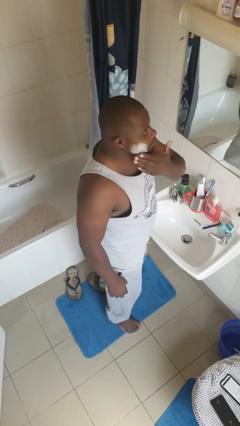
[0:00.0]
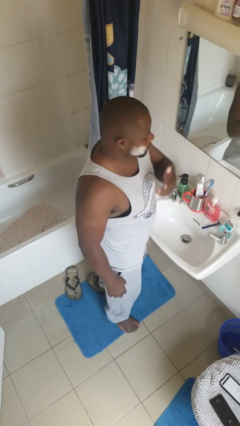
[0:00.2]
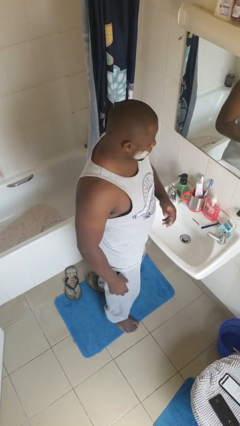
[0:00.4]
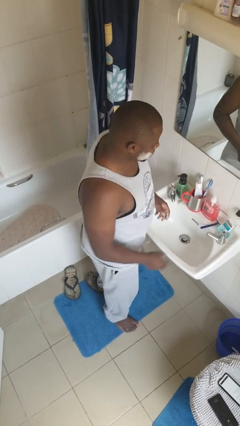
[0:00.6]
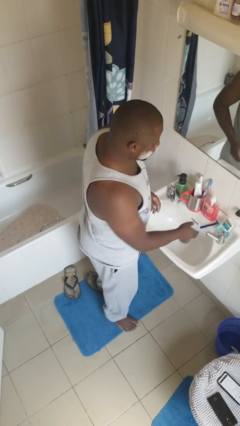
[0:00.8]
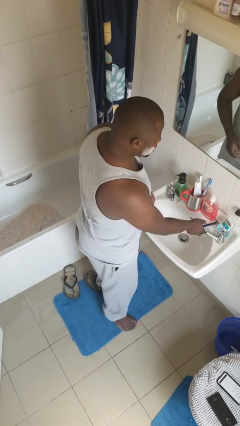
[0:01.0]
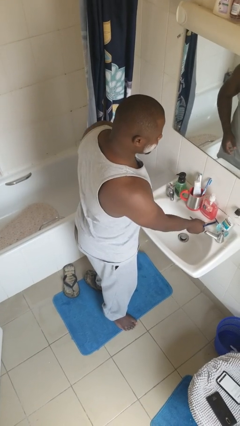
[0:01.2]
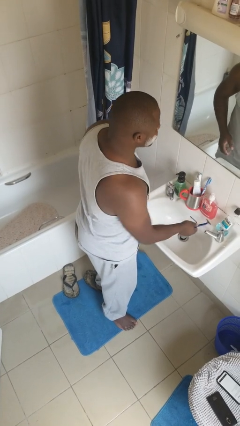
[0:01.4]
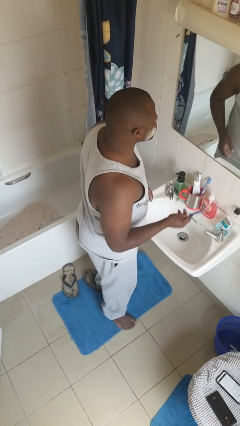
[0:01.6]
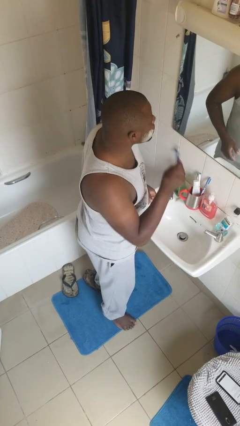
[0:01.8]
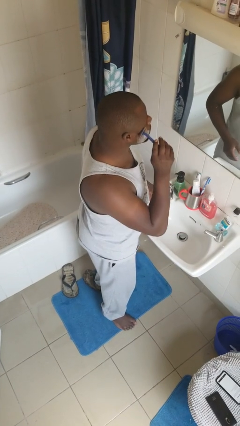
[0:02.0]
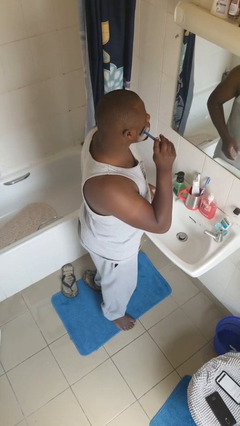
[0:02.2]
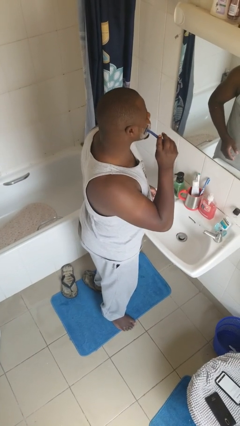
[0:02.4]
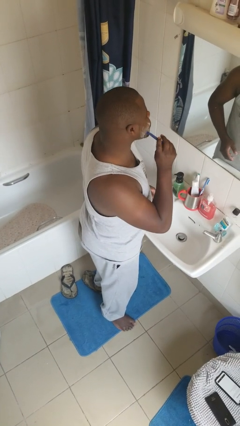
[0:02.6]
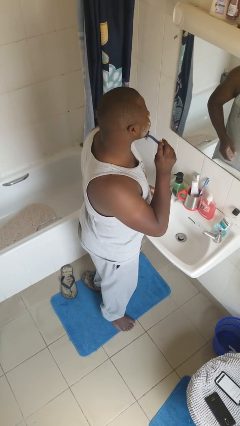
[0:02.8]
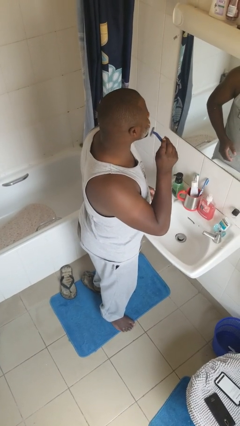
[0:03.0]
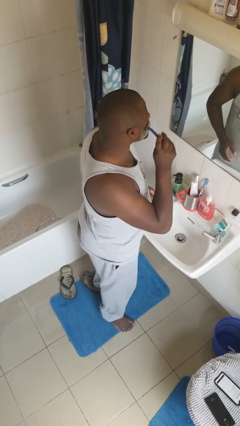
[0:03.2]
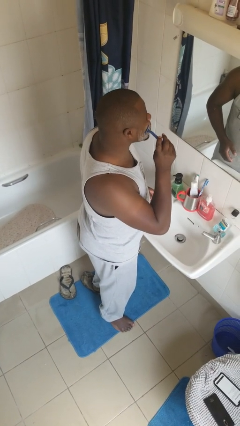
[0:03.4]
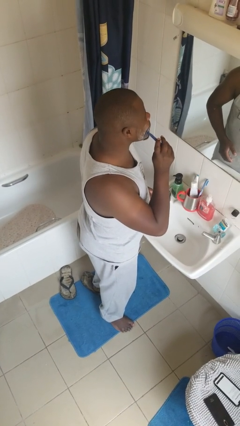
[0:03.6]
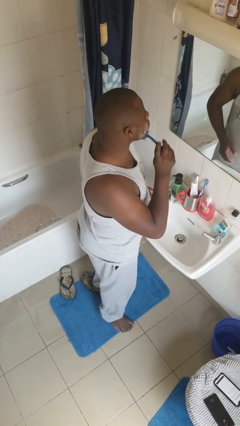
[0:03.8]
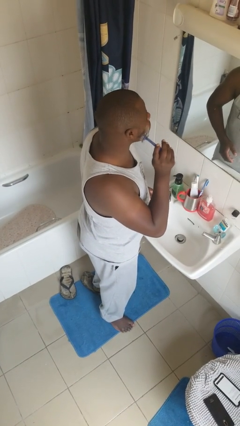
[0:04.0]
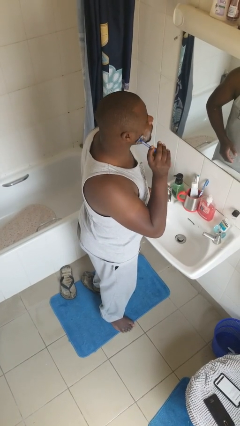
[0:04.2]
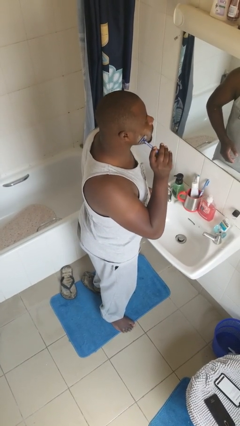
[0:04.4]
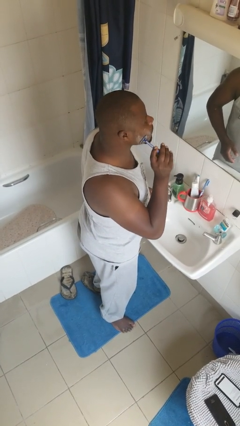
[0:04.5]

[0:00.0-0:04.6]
person shaves face

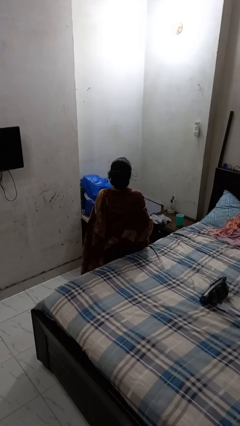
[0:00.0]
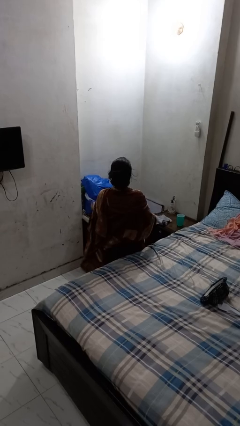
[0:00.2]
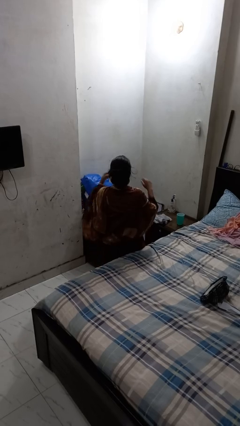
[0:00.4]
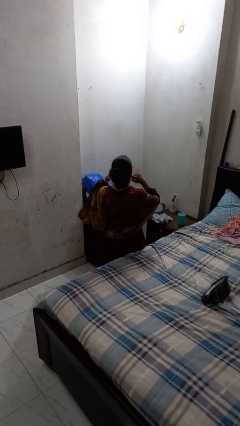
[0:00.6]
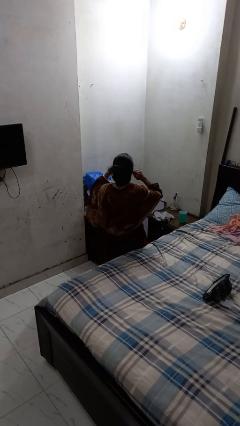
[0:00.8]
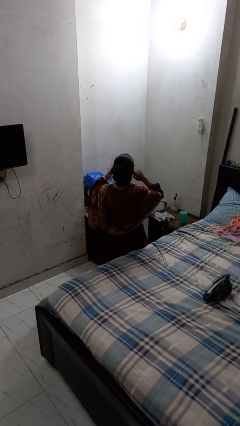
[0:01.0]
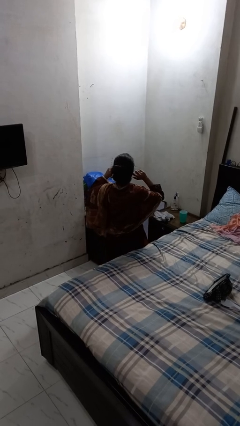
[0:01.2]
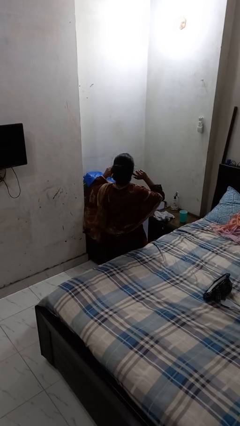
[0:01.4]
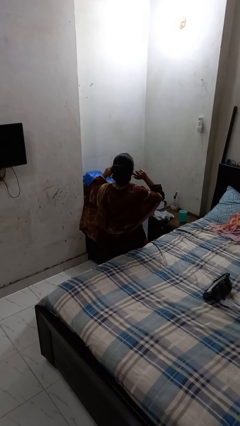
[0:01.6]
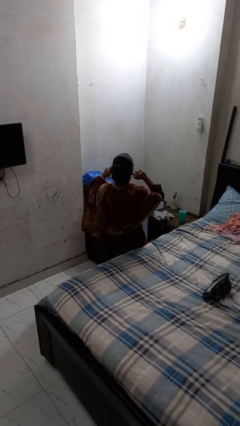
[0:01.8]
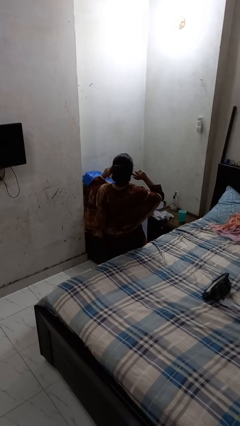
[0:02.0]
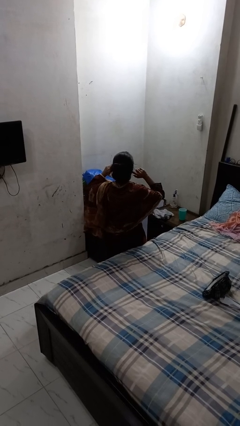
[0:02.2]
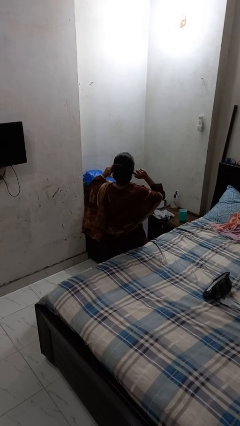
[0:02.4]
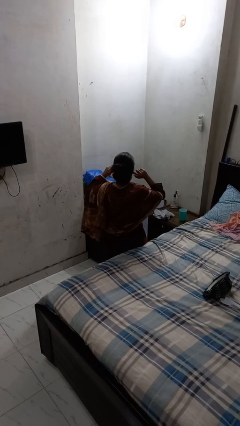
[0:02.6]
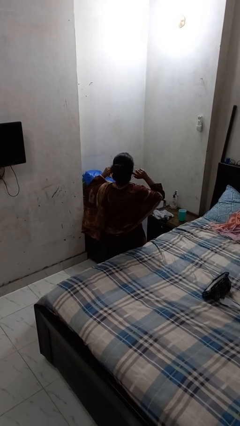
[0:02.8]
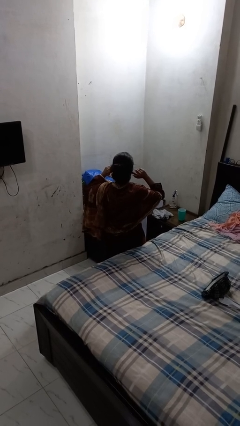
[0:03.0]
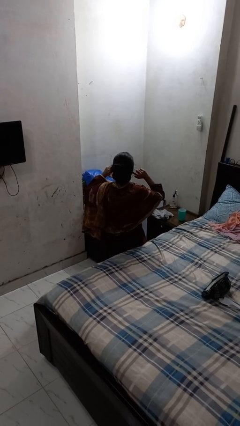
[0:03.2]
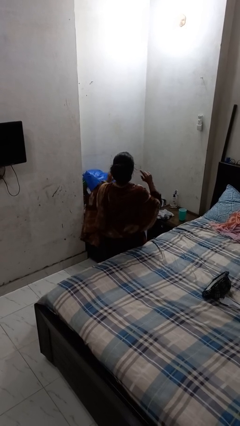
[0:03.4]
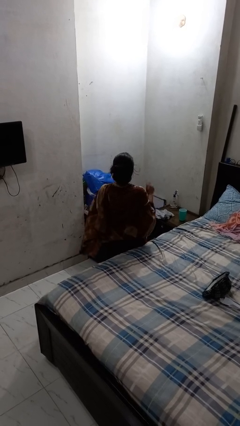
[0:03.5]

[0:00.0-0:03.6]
person puts fingers in ear

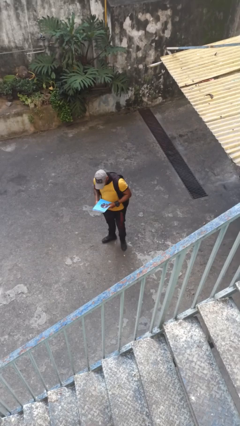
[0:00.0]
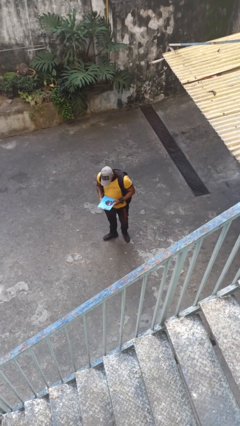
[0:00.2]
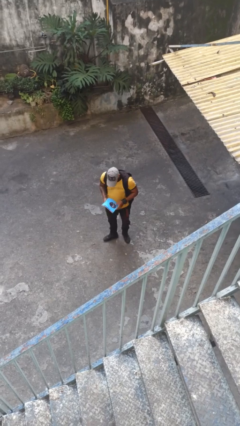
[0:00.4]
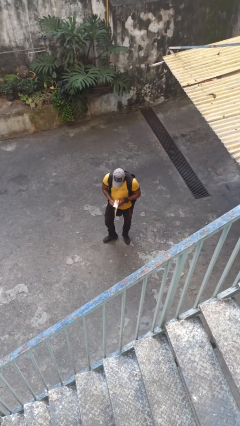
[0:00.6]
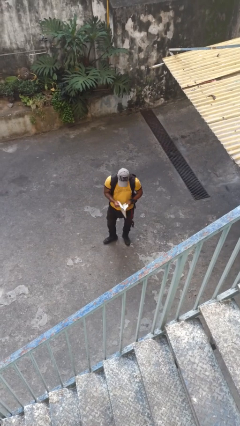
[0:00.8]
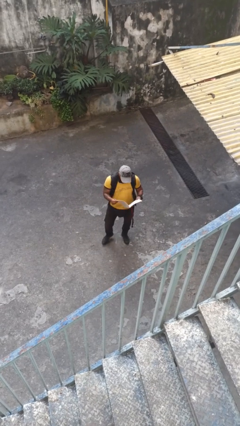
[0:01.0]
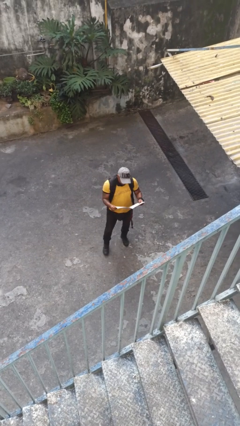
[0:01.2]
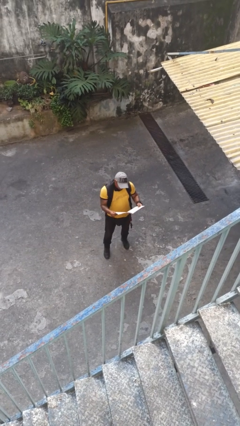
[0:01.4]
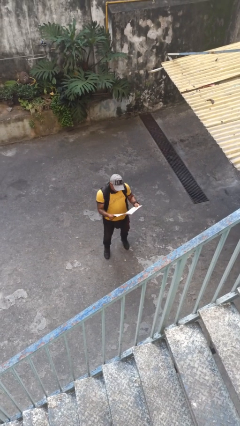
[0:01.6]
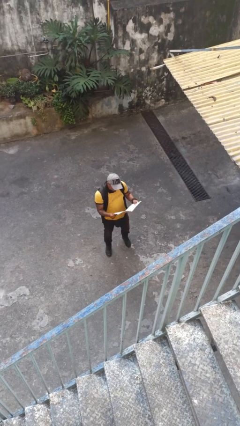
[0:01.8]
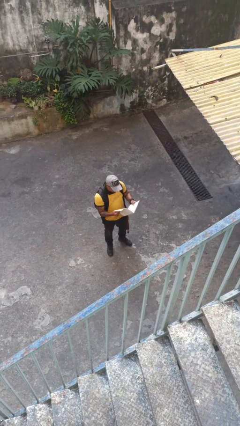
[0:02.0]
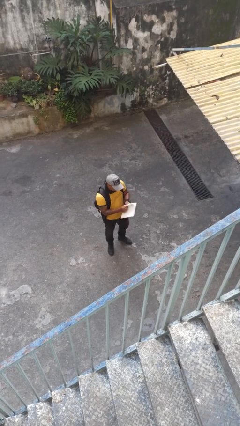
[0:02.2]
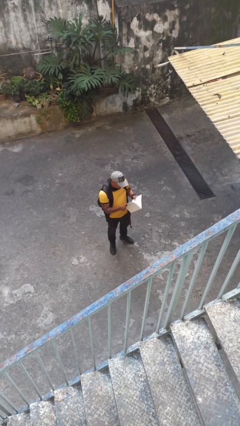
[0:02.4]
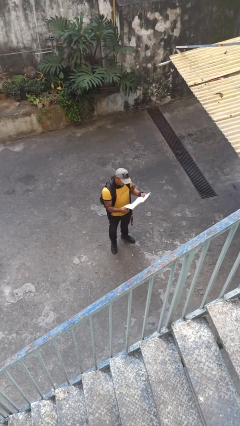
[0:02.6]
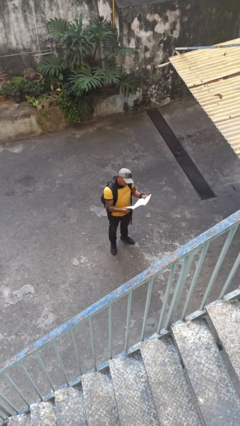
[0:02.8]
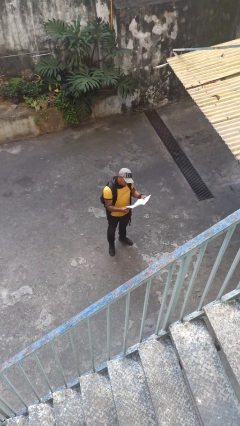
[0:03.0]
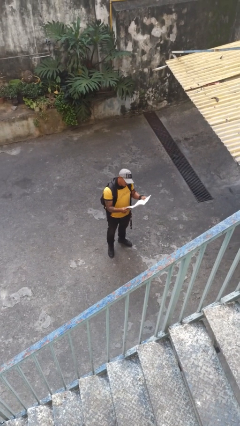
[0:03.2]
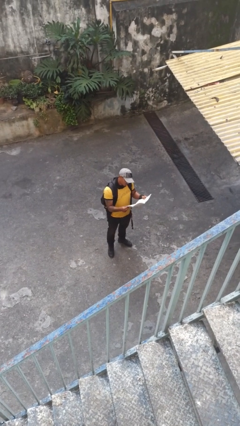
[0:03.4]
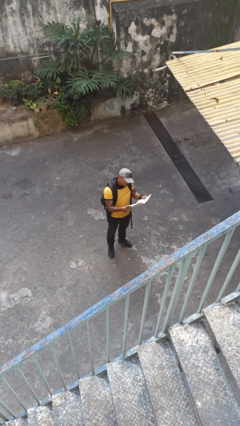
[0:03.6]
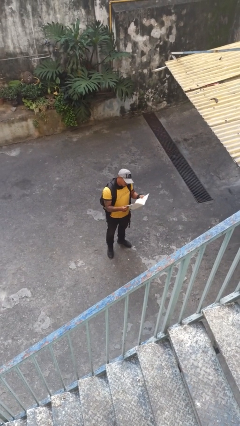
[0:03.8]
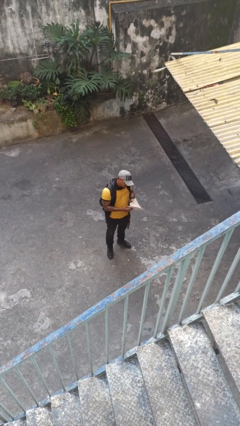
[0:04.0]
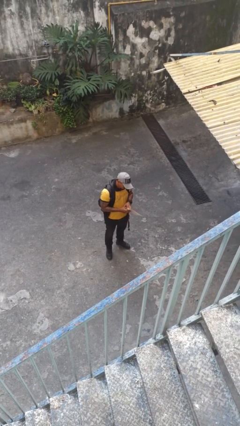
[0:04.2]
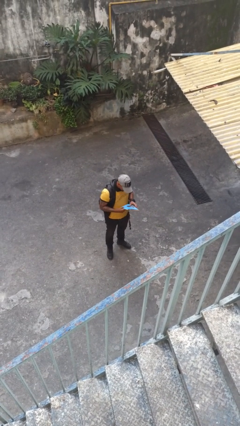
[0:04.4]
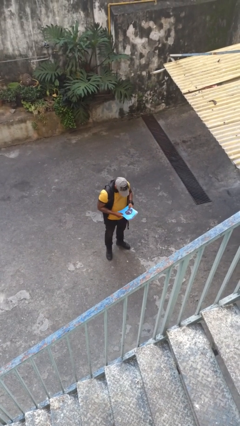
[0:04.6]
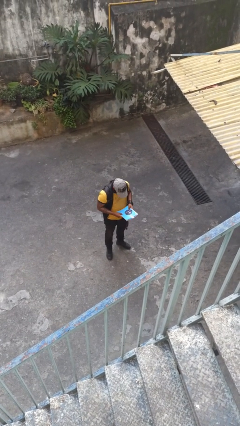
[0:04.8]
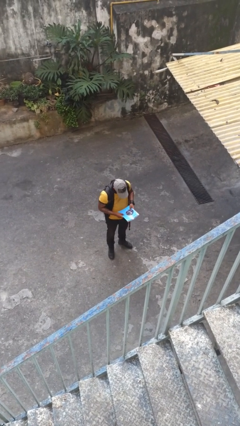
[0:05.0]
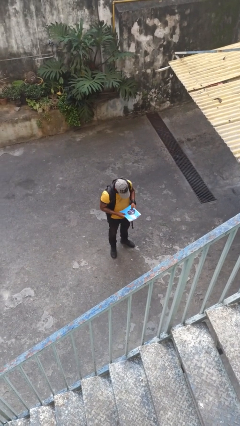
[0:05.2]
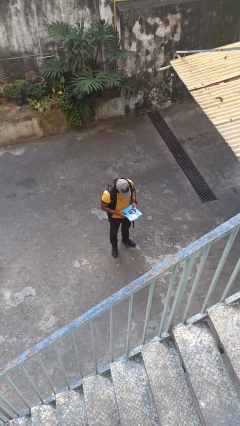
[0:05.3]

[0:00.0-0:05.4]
person reads document

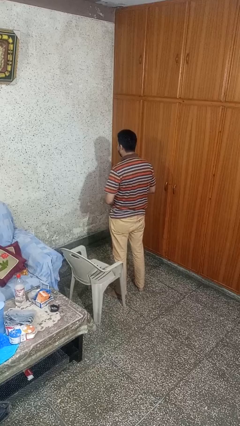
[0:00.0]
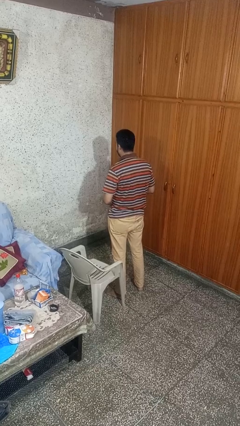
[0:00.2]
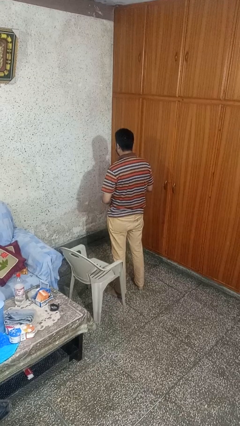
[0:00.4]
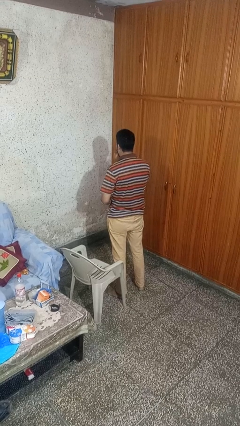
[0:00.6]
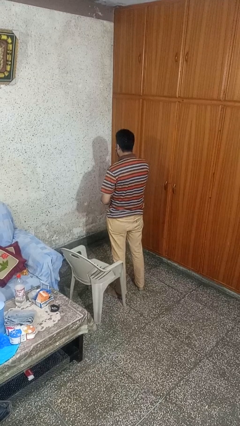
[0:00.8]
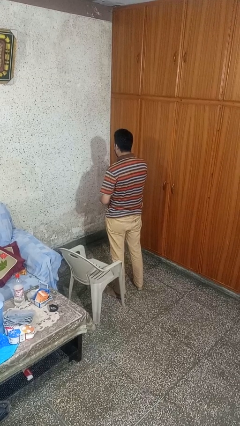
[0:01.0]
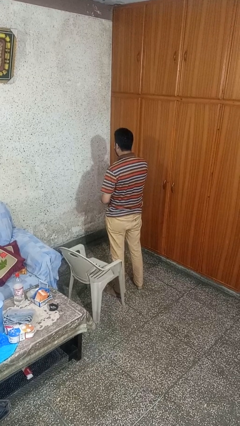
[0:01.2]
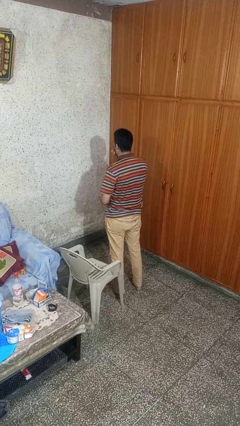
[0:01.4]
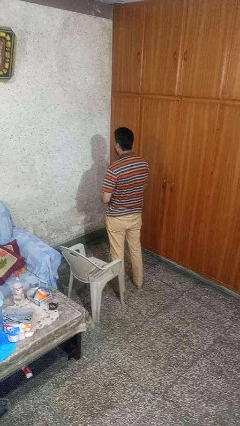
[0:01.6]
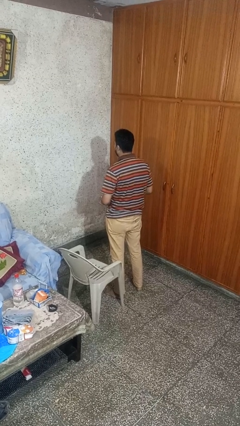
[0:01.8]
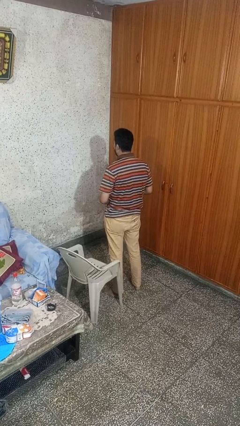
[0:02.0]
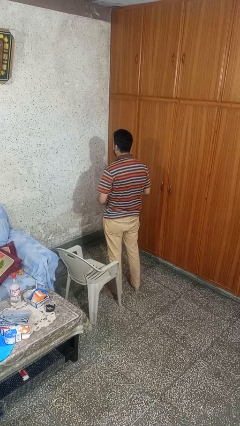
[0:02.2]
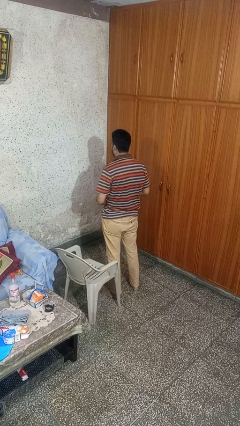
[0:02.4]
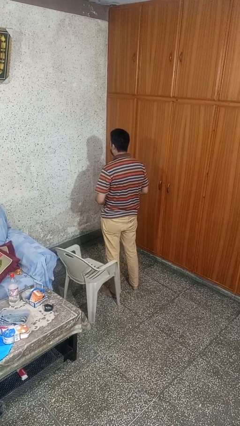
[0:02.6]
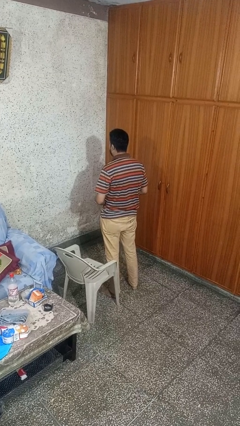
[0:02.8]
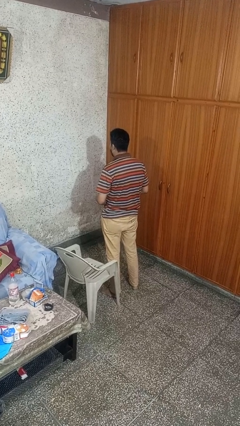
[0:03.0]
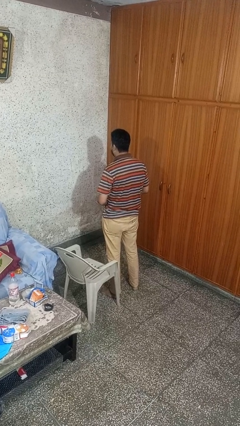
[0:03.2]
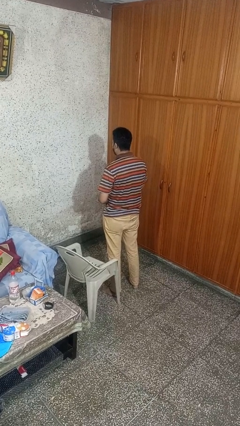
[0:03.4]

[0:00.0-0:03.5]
person eats snack from bag

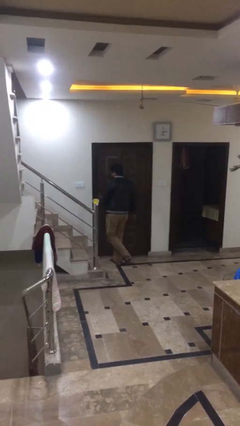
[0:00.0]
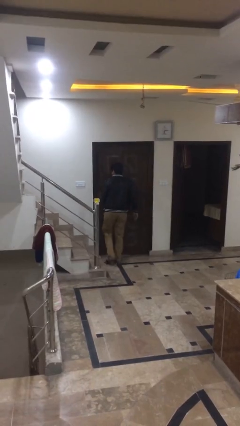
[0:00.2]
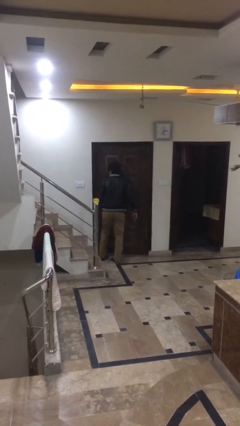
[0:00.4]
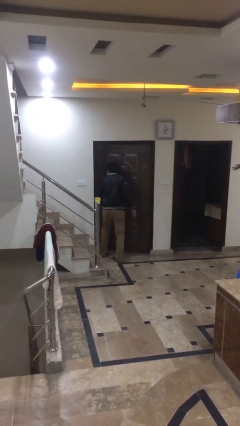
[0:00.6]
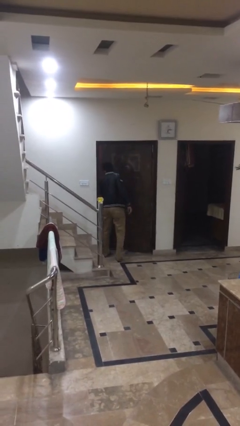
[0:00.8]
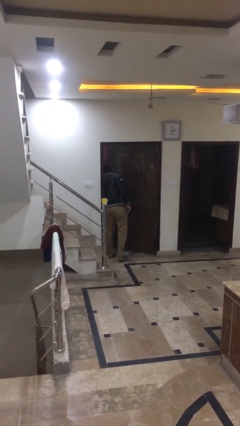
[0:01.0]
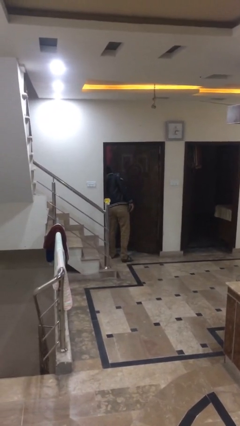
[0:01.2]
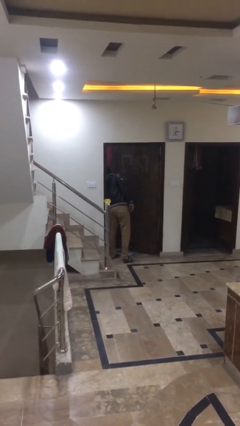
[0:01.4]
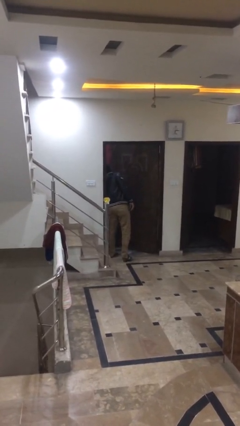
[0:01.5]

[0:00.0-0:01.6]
person opens facility door
